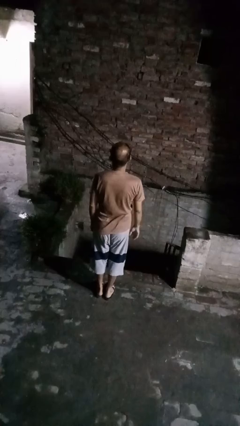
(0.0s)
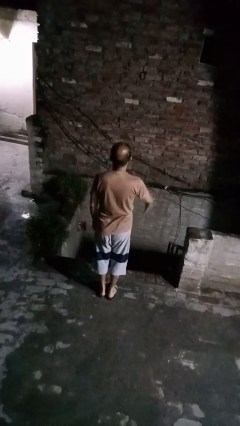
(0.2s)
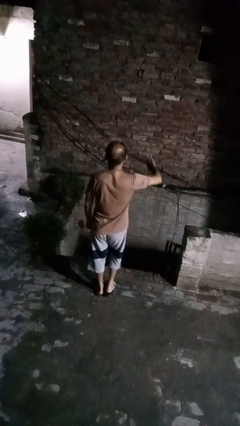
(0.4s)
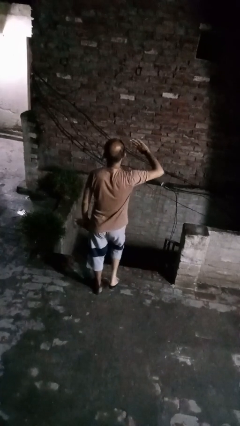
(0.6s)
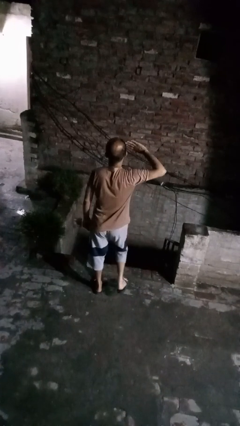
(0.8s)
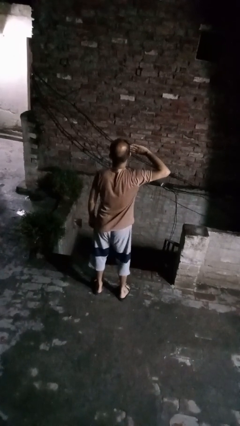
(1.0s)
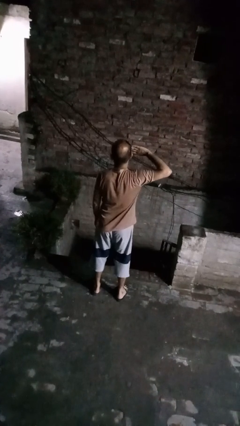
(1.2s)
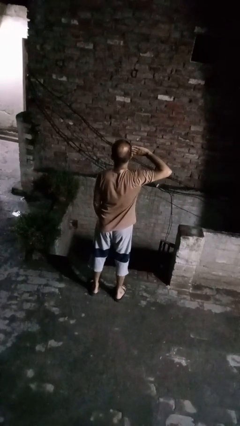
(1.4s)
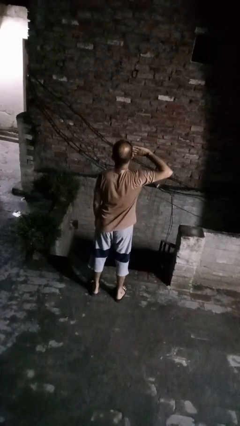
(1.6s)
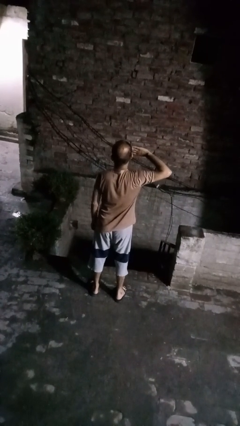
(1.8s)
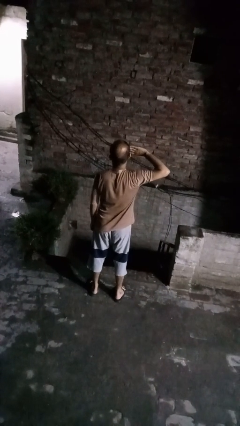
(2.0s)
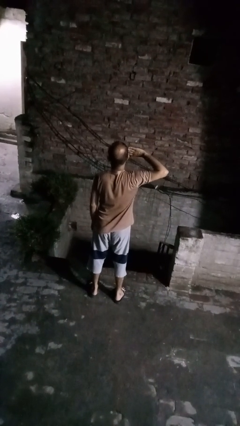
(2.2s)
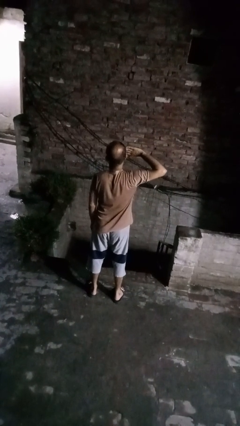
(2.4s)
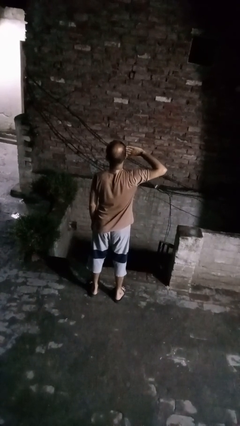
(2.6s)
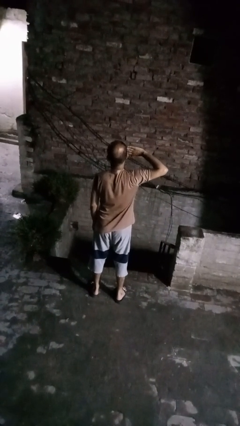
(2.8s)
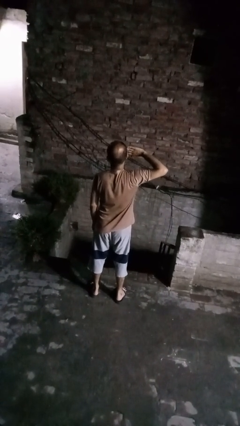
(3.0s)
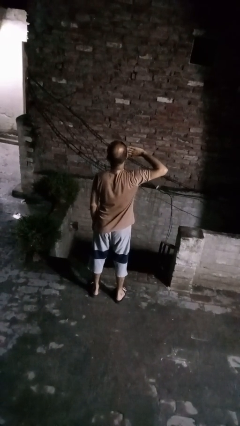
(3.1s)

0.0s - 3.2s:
person salutes

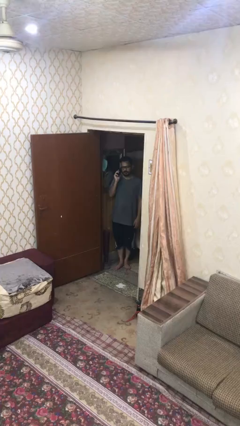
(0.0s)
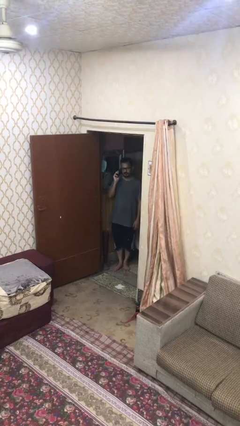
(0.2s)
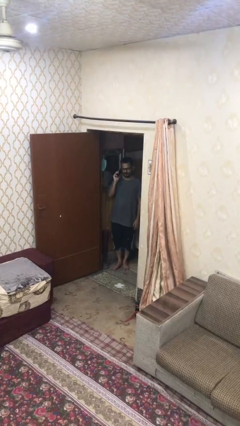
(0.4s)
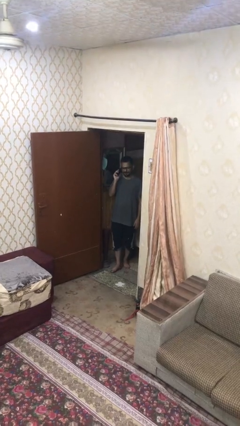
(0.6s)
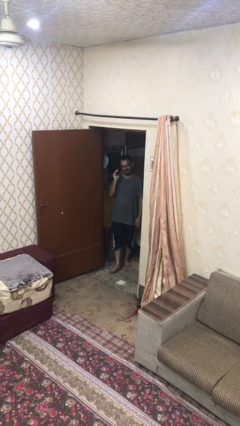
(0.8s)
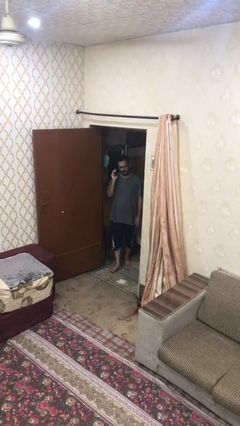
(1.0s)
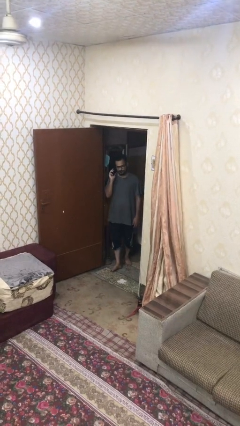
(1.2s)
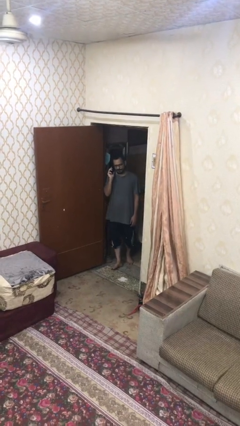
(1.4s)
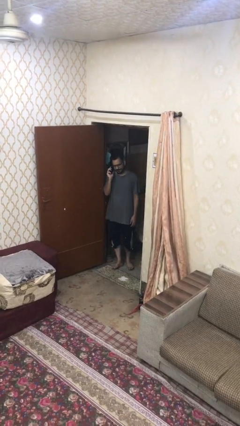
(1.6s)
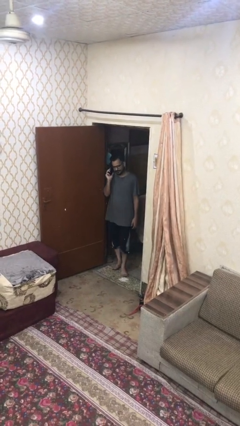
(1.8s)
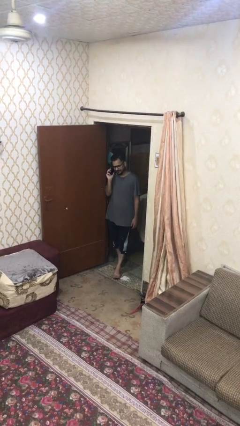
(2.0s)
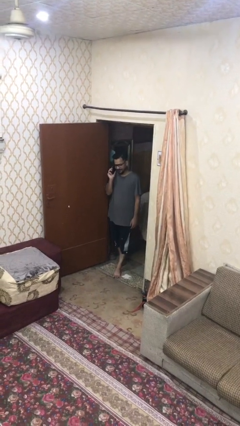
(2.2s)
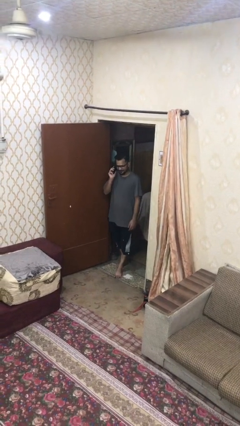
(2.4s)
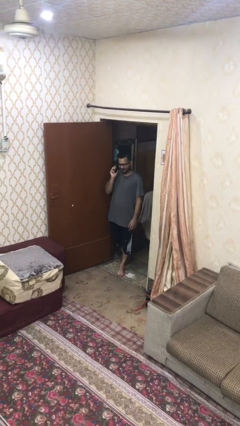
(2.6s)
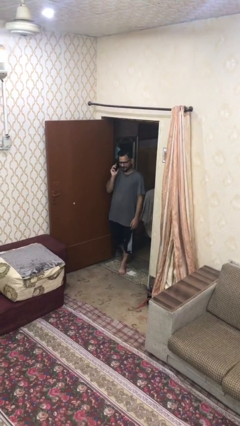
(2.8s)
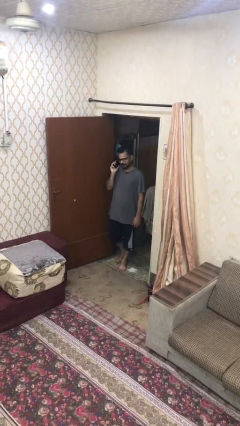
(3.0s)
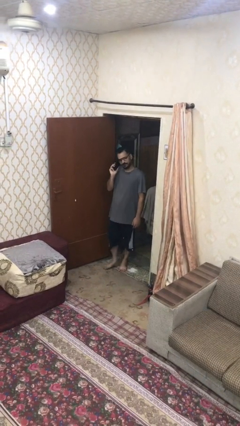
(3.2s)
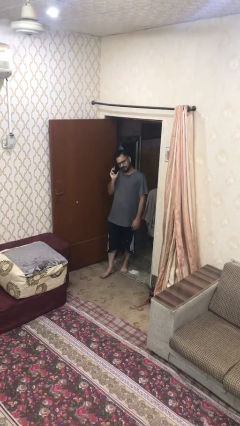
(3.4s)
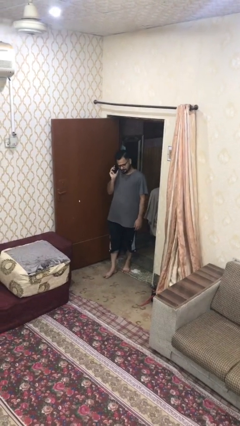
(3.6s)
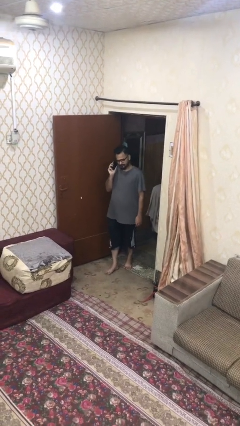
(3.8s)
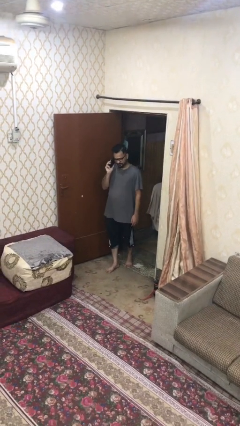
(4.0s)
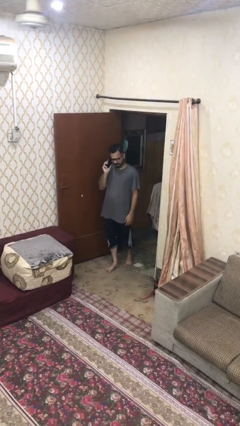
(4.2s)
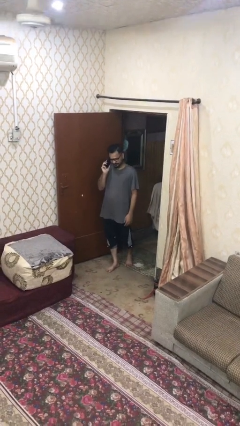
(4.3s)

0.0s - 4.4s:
person enters scene through structure

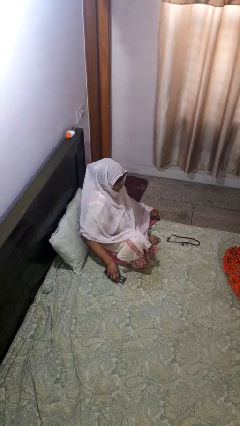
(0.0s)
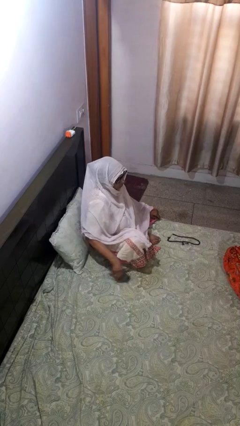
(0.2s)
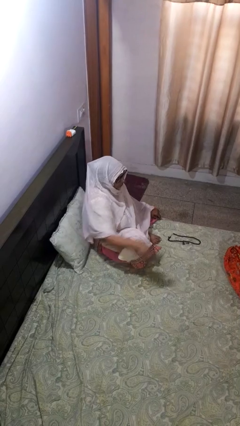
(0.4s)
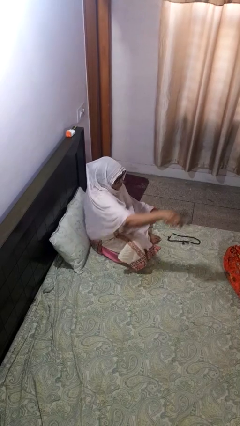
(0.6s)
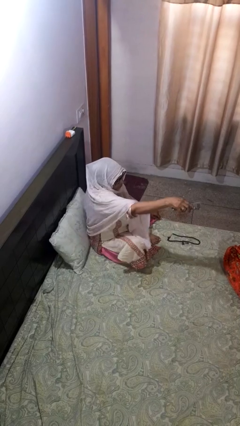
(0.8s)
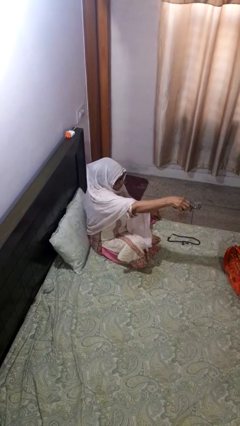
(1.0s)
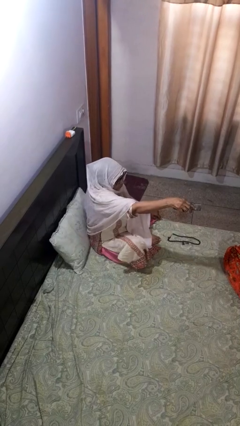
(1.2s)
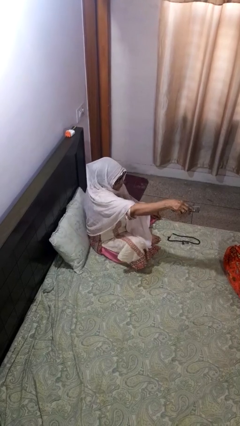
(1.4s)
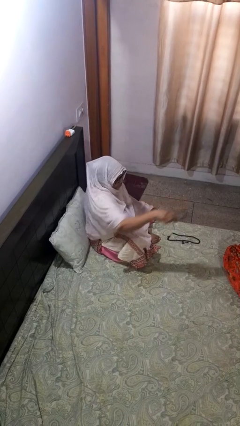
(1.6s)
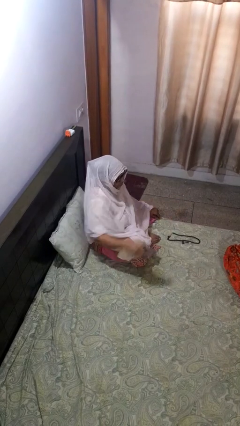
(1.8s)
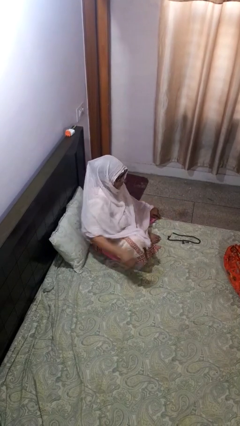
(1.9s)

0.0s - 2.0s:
person uses television remote

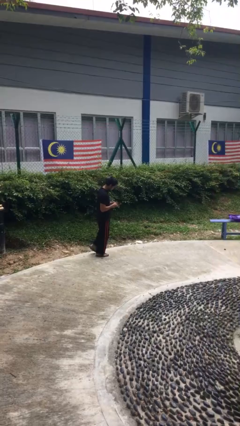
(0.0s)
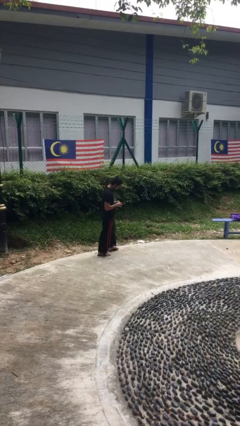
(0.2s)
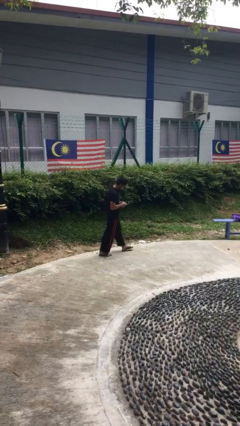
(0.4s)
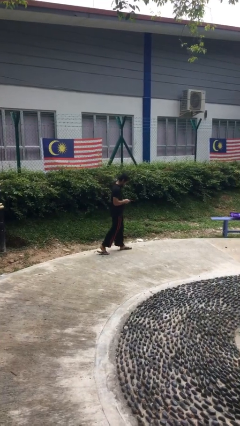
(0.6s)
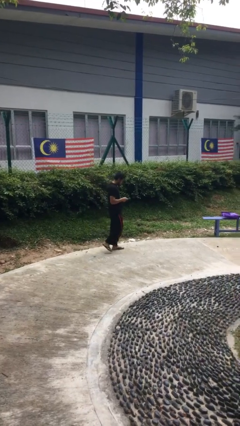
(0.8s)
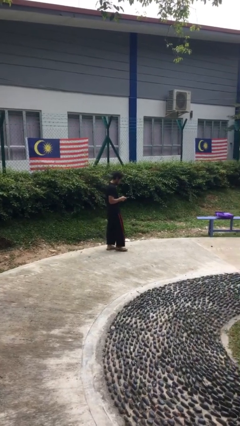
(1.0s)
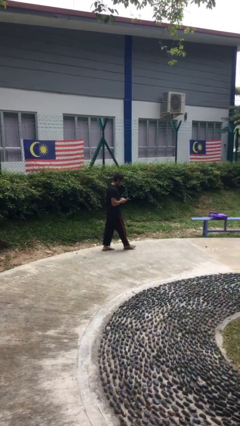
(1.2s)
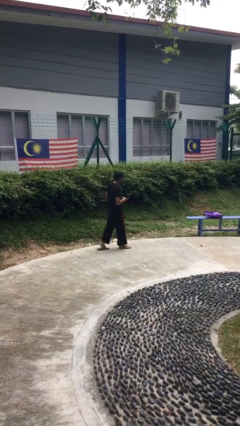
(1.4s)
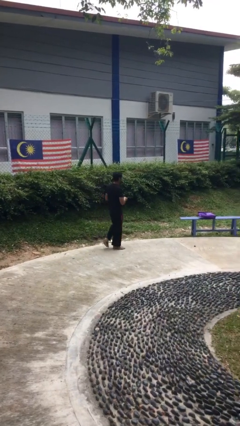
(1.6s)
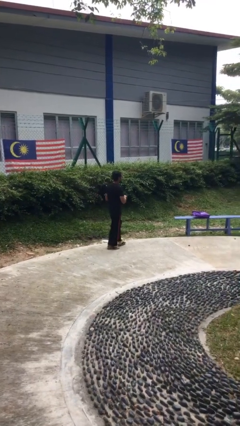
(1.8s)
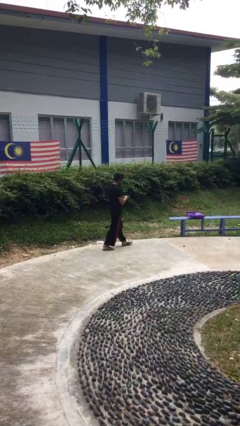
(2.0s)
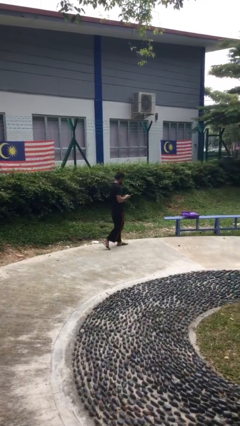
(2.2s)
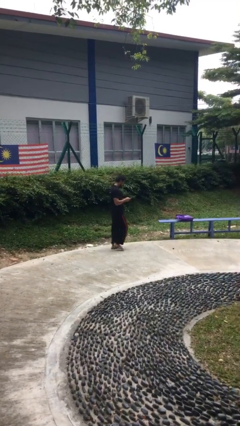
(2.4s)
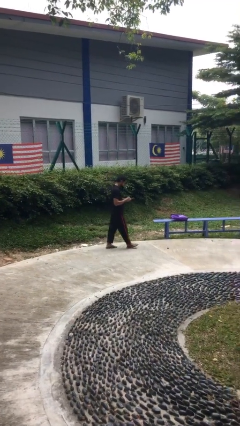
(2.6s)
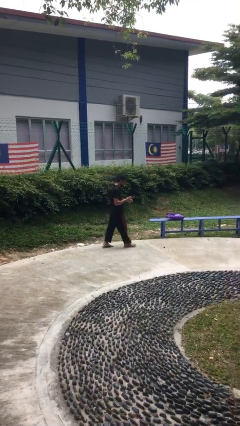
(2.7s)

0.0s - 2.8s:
person texts on phone

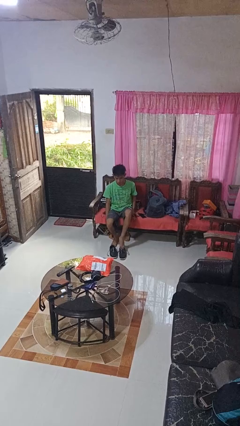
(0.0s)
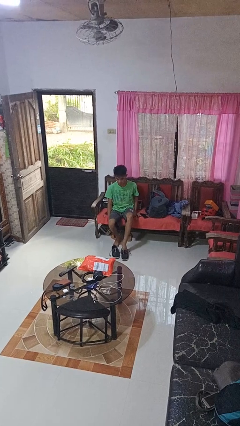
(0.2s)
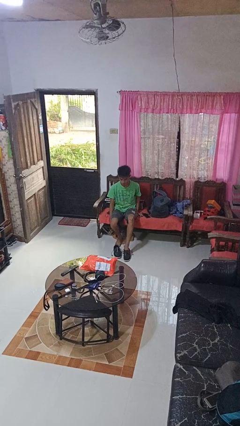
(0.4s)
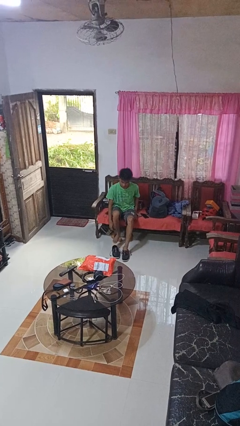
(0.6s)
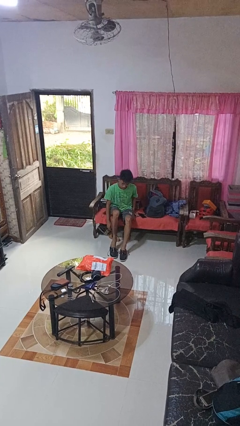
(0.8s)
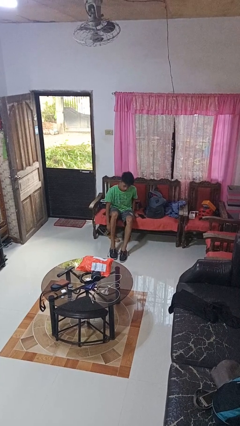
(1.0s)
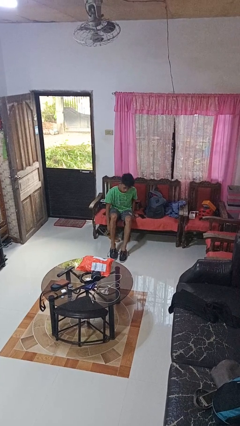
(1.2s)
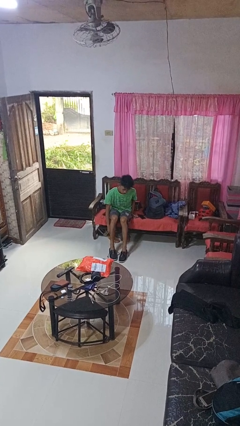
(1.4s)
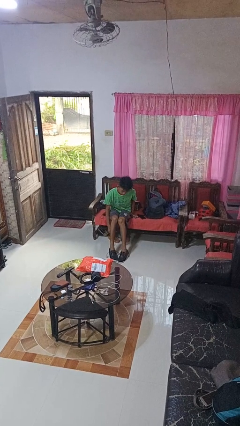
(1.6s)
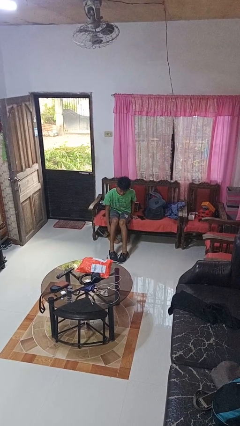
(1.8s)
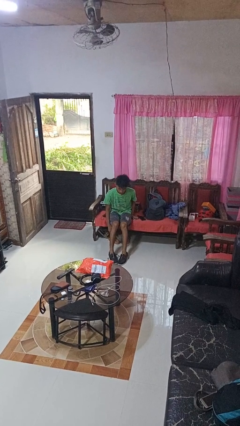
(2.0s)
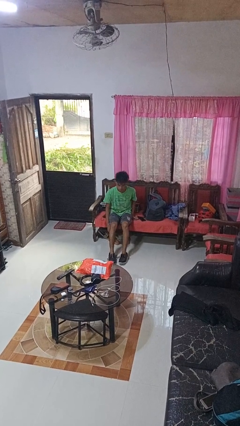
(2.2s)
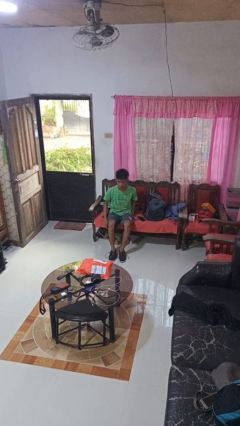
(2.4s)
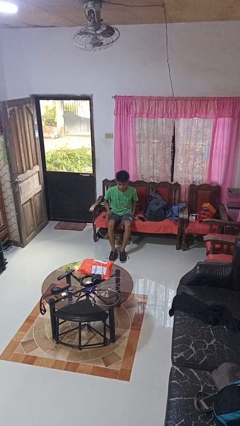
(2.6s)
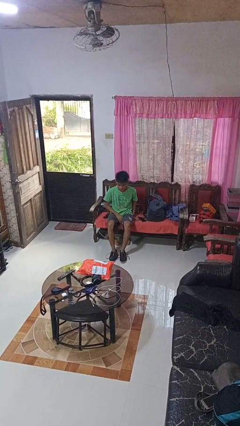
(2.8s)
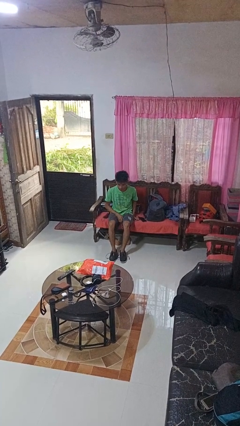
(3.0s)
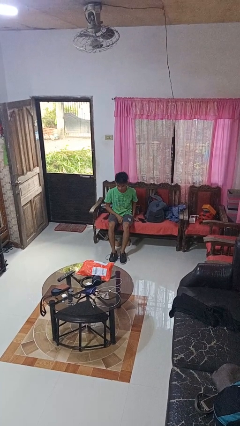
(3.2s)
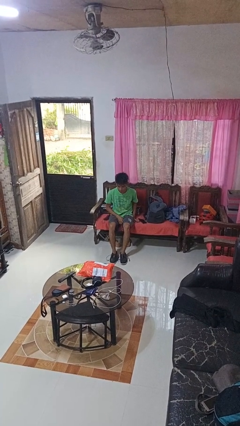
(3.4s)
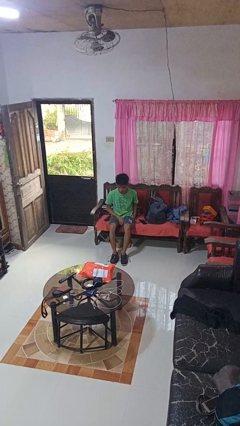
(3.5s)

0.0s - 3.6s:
person puts on shoes

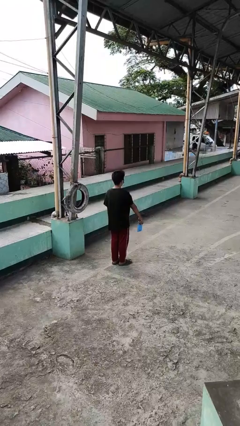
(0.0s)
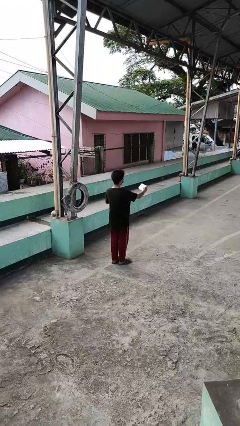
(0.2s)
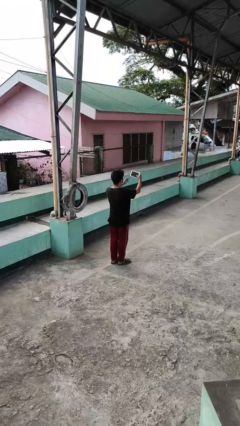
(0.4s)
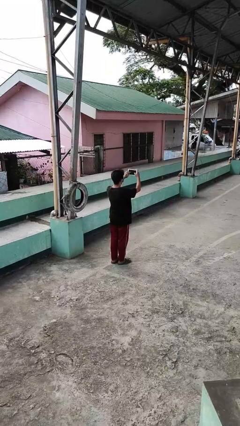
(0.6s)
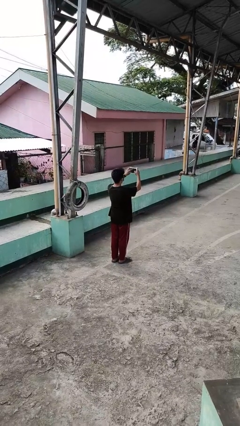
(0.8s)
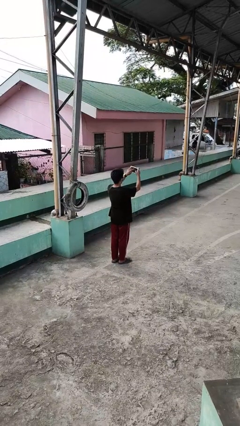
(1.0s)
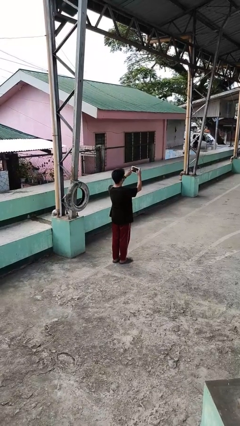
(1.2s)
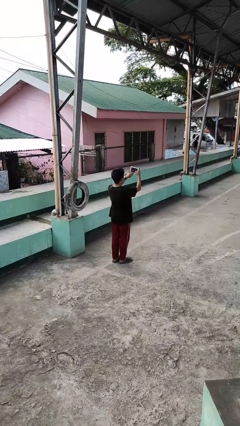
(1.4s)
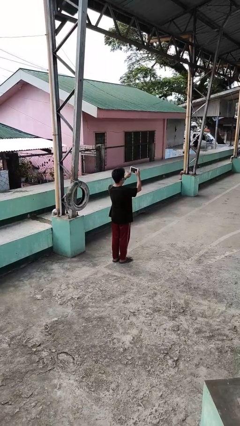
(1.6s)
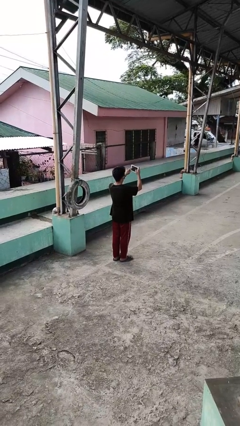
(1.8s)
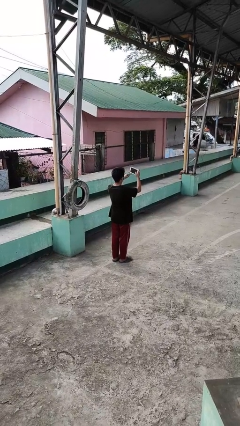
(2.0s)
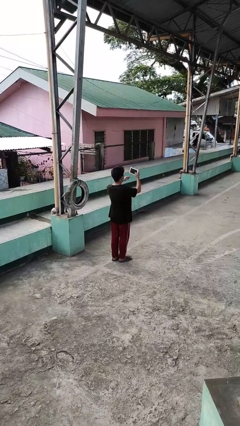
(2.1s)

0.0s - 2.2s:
person interacts with tablet
